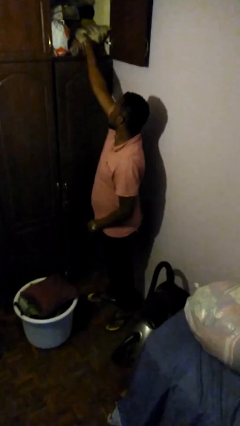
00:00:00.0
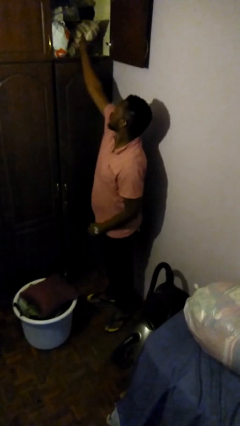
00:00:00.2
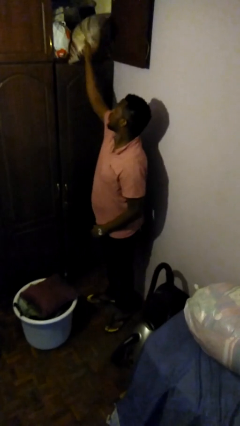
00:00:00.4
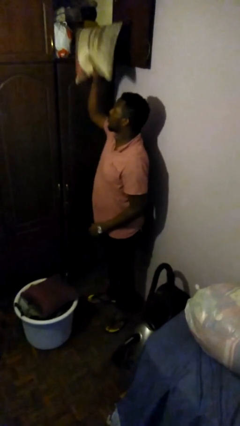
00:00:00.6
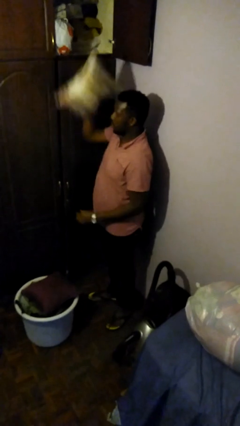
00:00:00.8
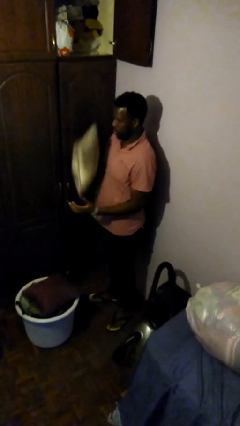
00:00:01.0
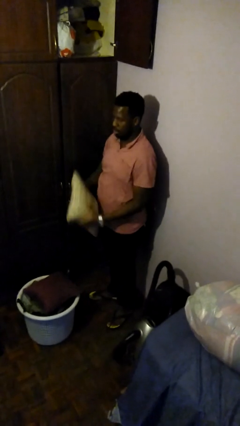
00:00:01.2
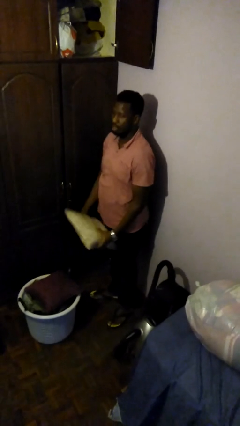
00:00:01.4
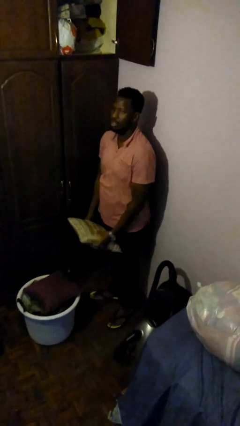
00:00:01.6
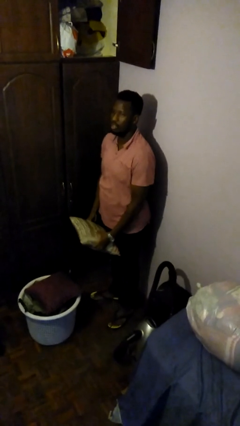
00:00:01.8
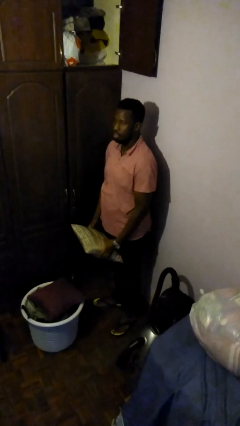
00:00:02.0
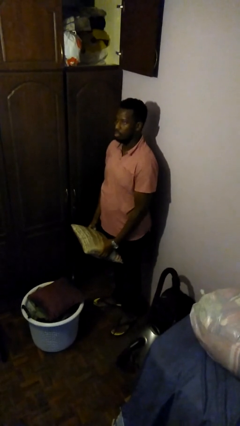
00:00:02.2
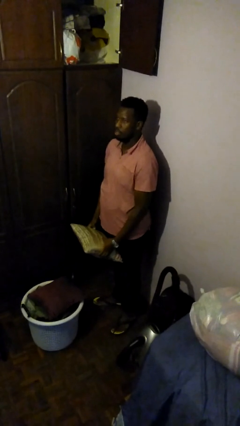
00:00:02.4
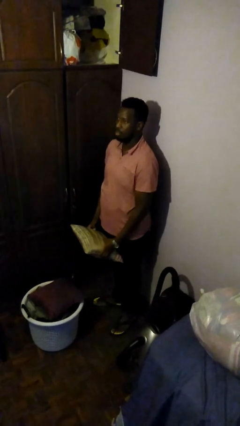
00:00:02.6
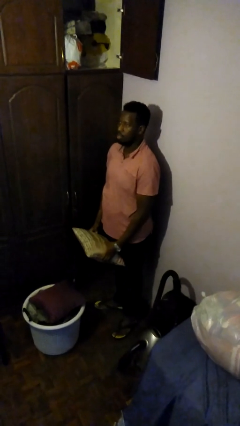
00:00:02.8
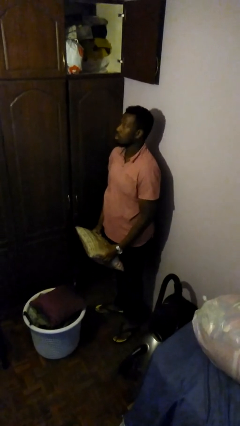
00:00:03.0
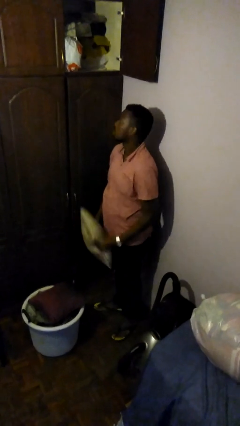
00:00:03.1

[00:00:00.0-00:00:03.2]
person picks up object from shelf

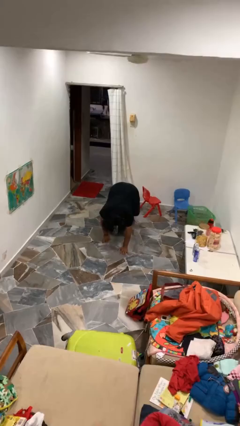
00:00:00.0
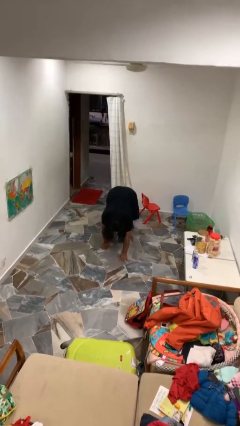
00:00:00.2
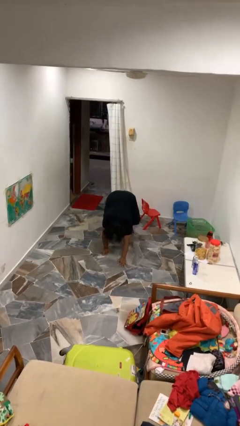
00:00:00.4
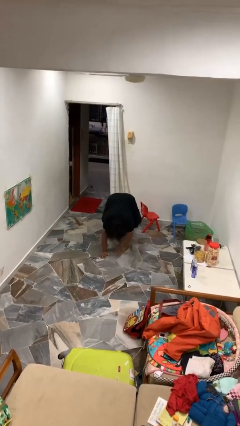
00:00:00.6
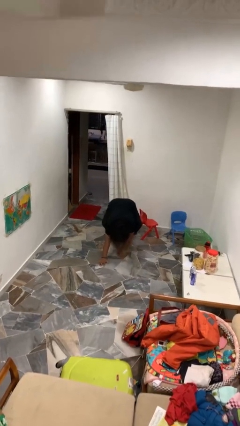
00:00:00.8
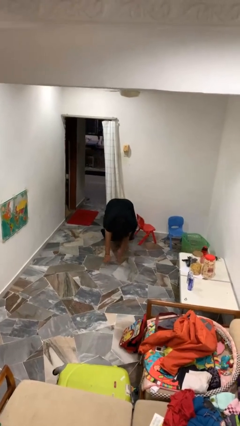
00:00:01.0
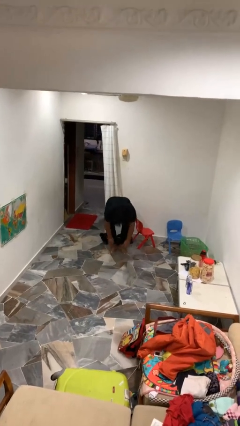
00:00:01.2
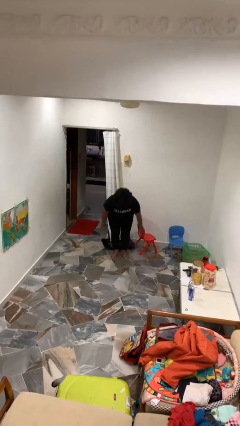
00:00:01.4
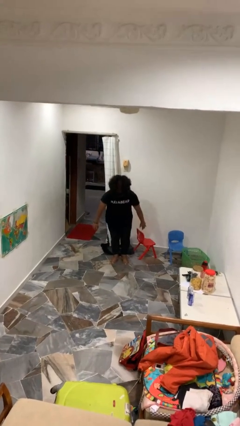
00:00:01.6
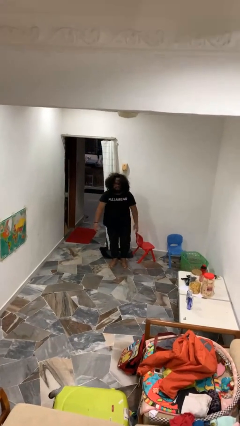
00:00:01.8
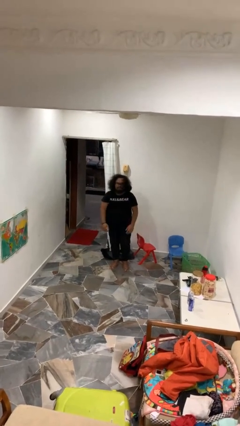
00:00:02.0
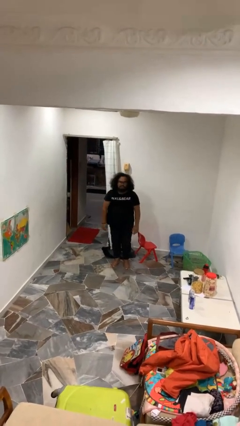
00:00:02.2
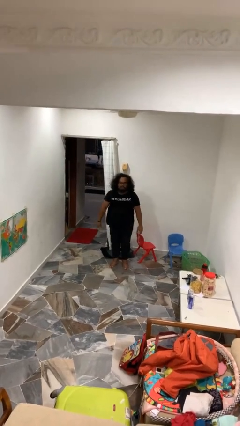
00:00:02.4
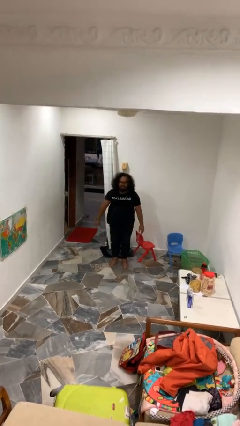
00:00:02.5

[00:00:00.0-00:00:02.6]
person stands up from floor

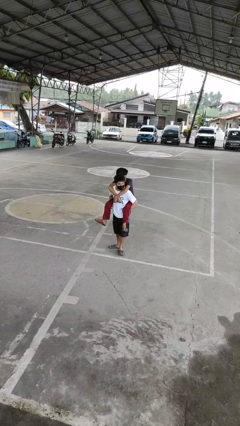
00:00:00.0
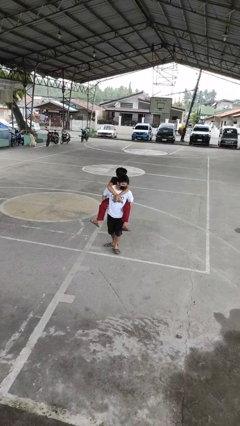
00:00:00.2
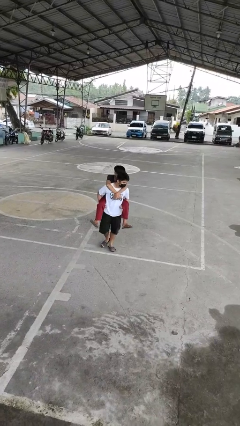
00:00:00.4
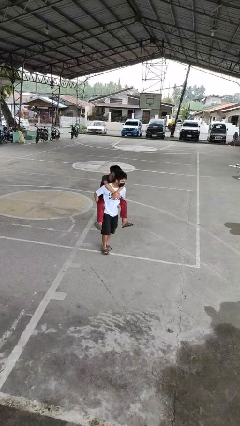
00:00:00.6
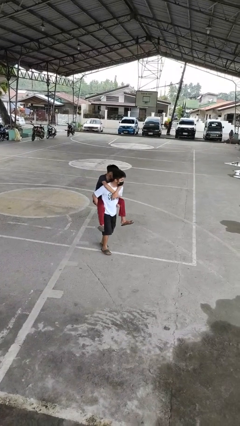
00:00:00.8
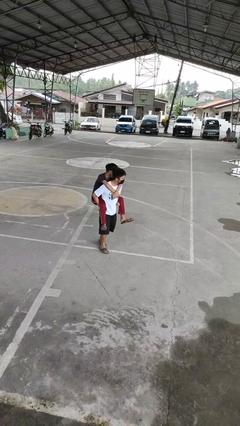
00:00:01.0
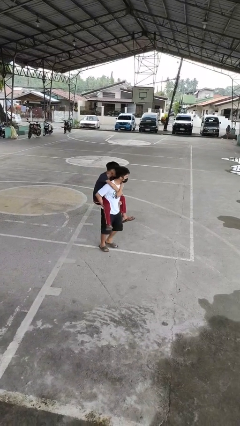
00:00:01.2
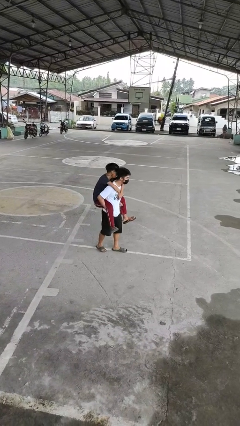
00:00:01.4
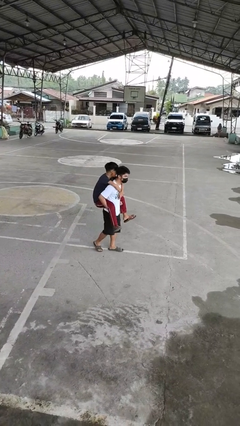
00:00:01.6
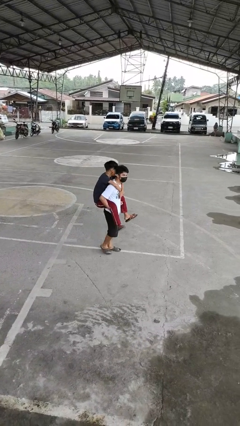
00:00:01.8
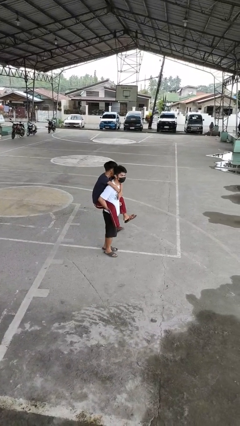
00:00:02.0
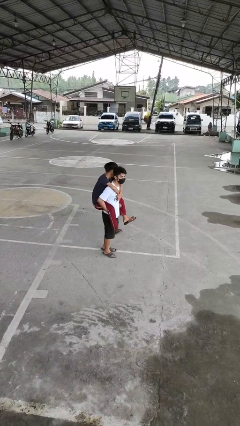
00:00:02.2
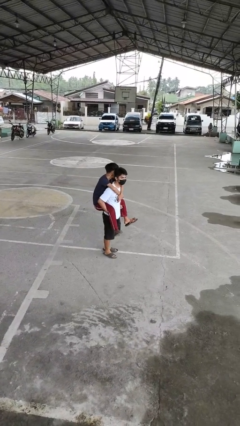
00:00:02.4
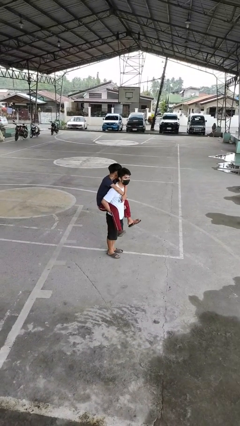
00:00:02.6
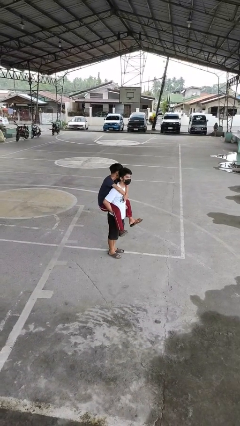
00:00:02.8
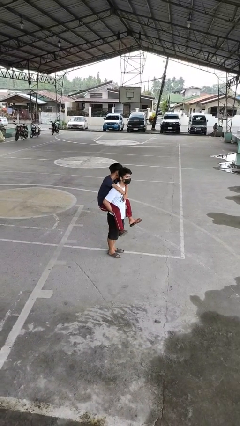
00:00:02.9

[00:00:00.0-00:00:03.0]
person carries person on back

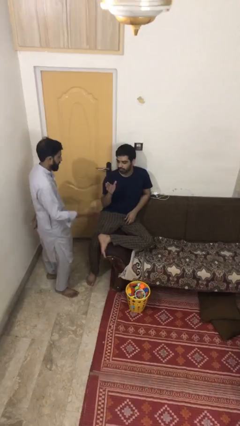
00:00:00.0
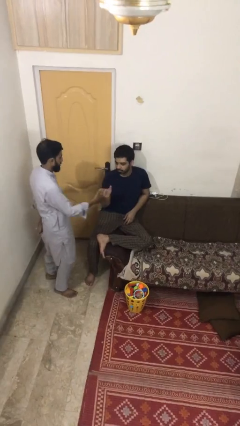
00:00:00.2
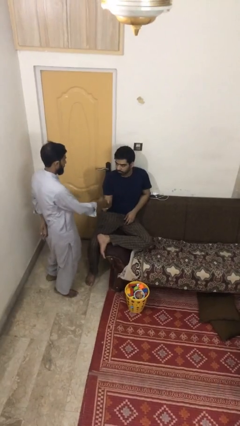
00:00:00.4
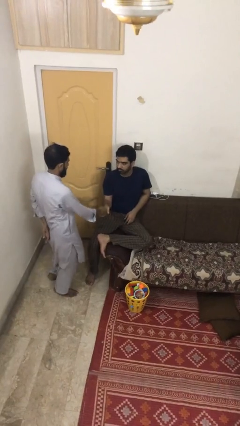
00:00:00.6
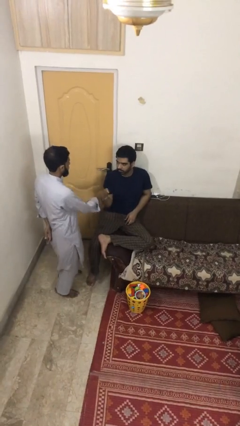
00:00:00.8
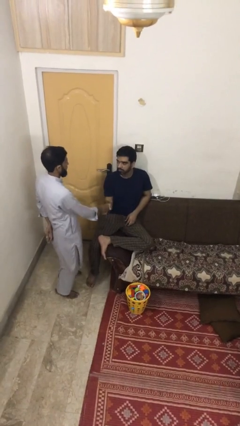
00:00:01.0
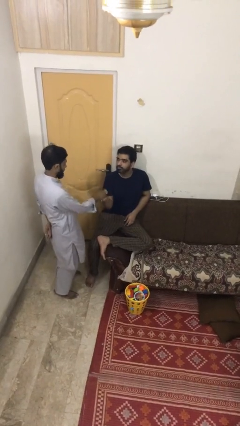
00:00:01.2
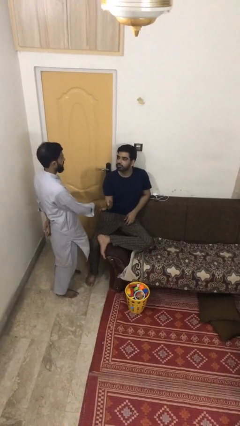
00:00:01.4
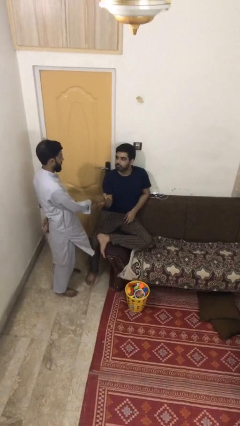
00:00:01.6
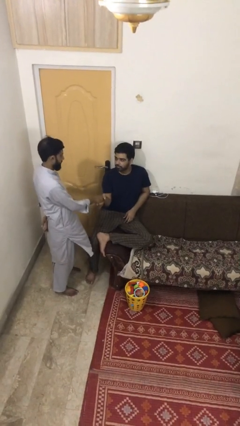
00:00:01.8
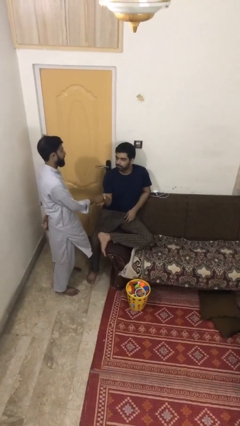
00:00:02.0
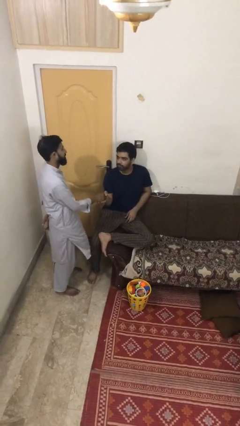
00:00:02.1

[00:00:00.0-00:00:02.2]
person shakes hand

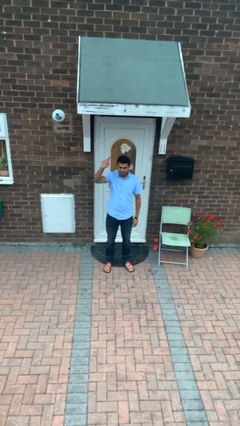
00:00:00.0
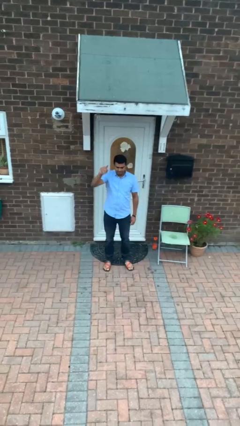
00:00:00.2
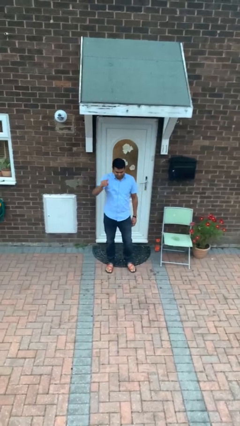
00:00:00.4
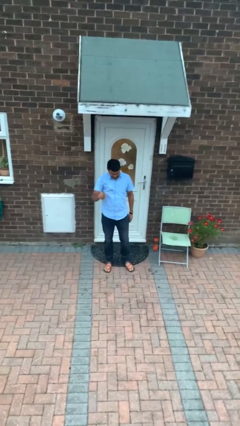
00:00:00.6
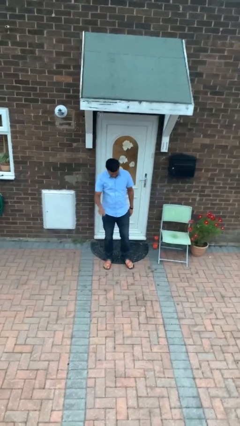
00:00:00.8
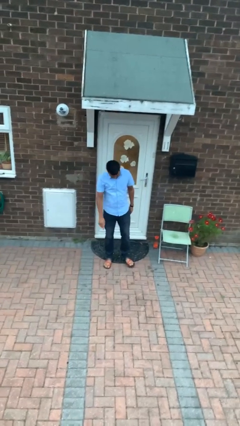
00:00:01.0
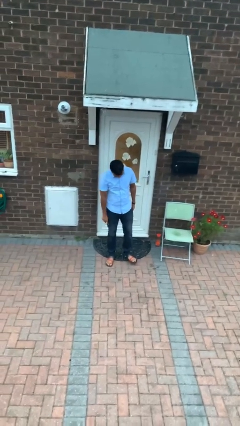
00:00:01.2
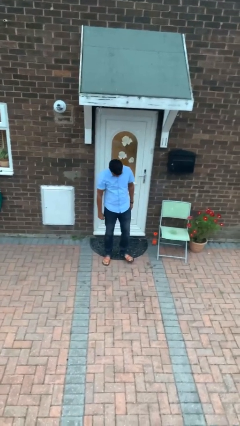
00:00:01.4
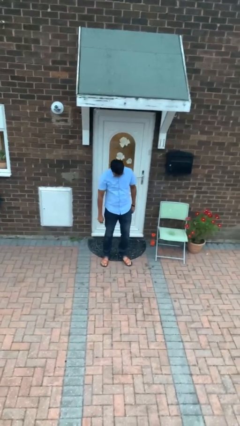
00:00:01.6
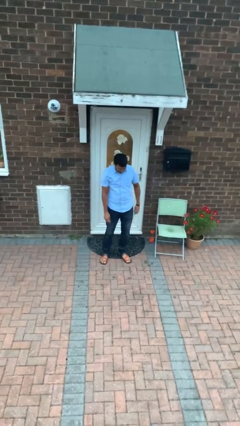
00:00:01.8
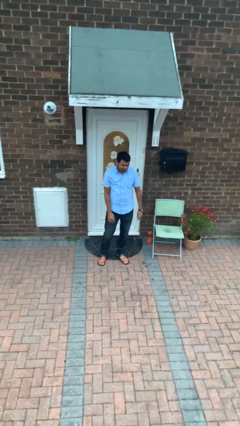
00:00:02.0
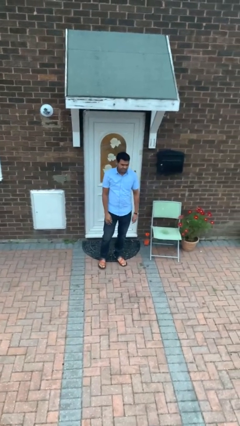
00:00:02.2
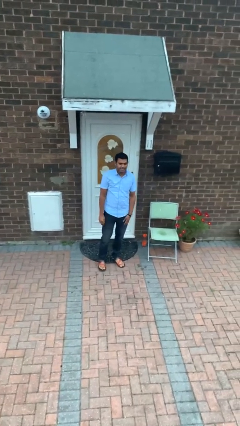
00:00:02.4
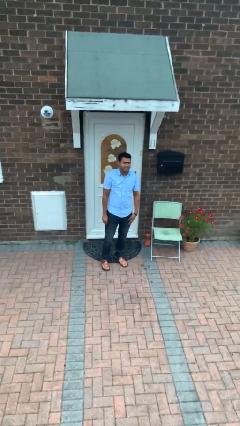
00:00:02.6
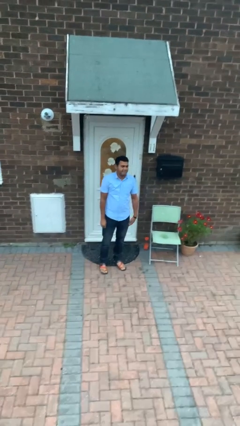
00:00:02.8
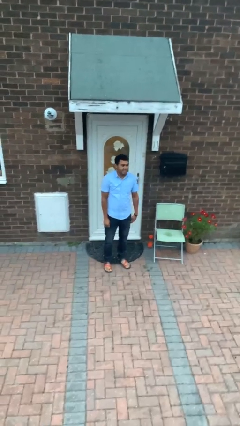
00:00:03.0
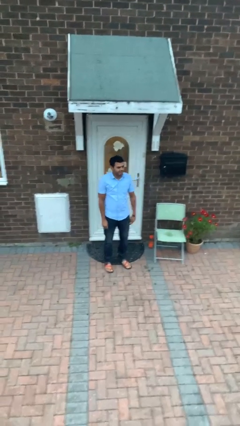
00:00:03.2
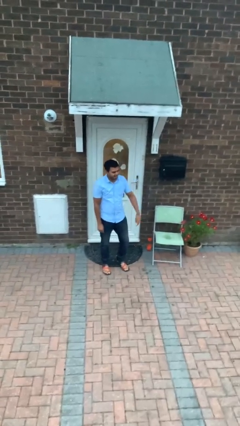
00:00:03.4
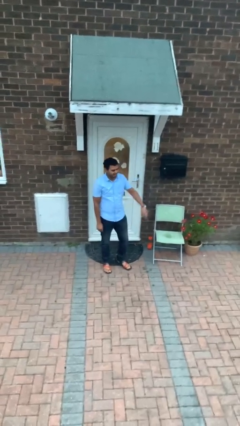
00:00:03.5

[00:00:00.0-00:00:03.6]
person gestures lower hand

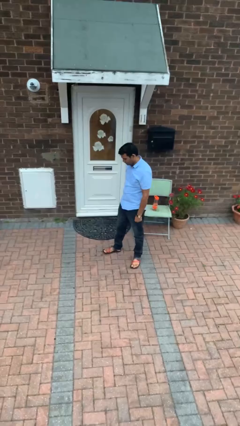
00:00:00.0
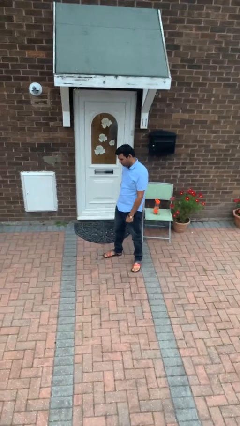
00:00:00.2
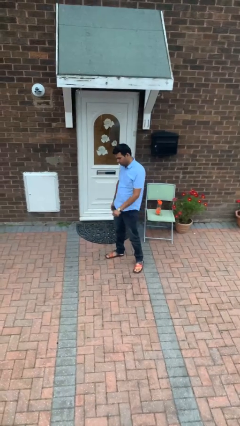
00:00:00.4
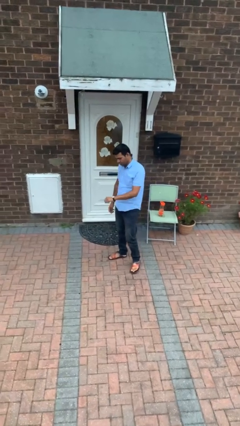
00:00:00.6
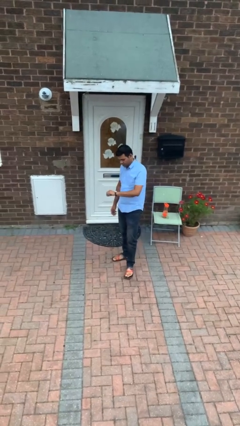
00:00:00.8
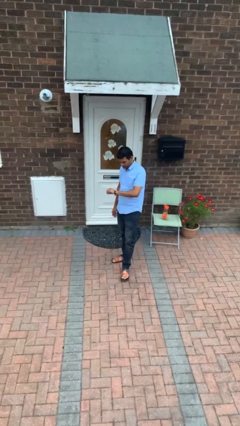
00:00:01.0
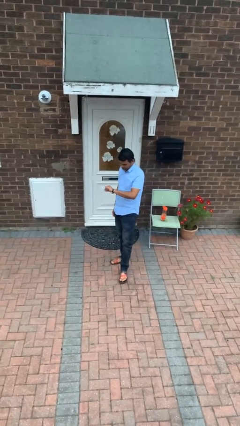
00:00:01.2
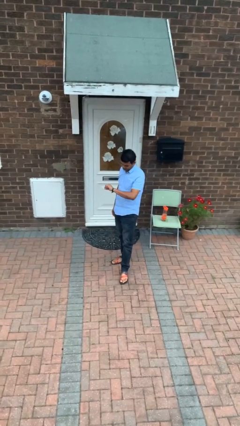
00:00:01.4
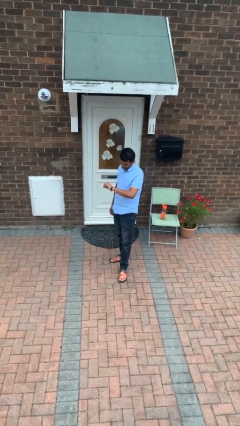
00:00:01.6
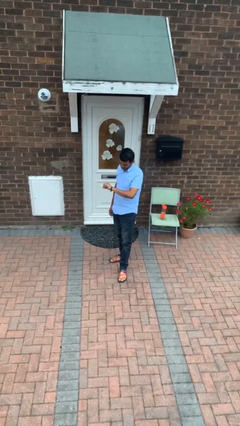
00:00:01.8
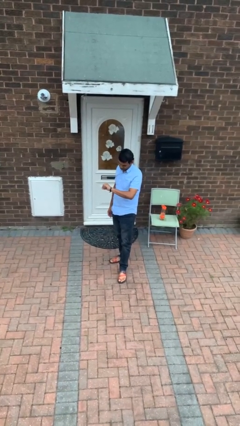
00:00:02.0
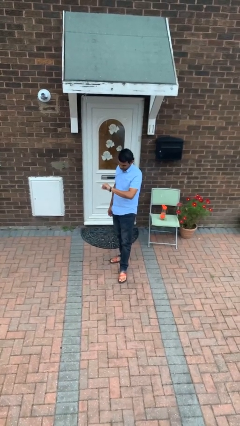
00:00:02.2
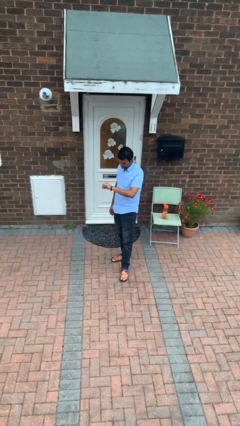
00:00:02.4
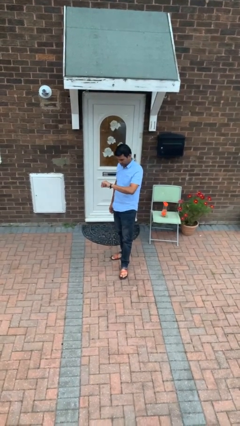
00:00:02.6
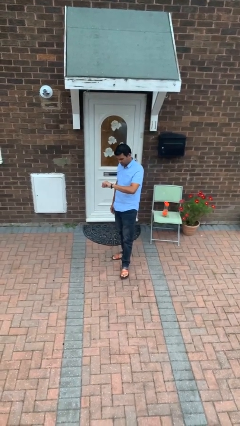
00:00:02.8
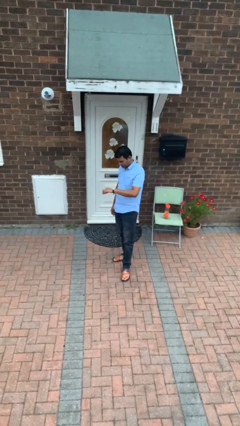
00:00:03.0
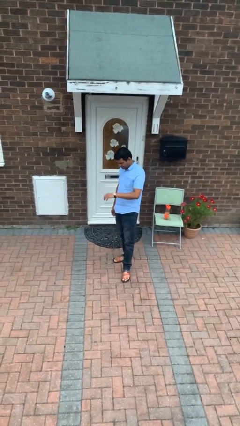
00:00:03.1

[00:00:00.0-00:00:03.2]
person looks at wristwatch
